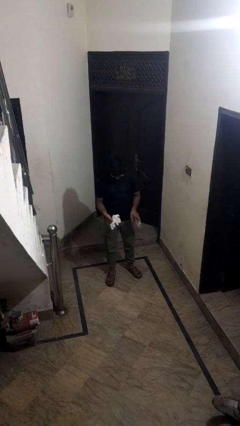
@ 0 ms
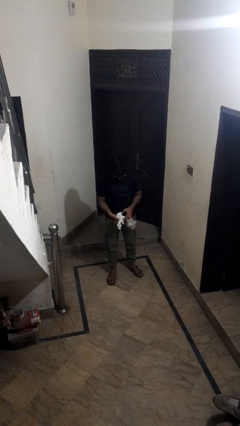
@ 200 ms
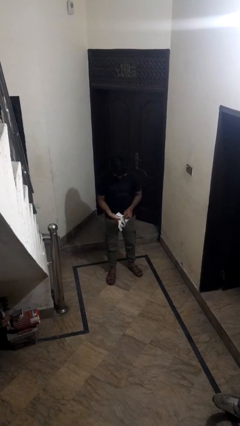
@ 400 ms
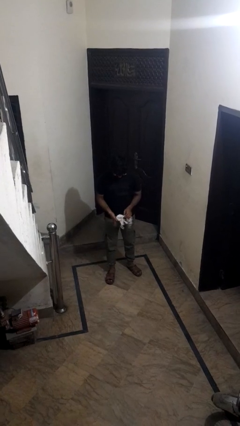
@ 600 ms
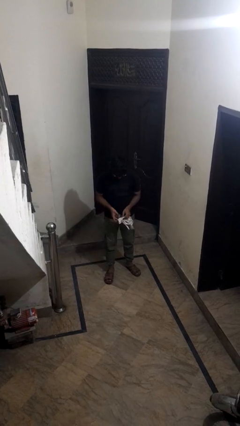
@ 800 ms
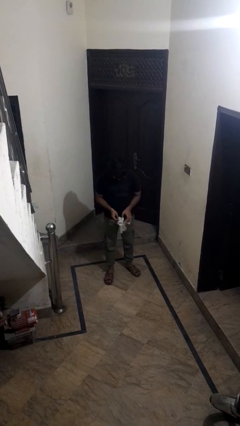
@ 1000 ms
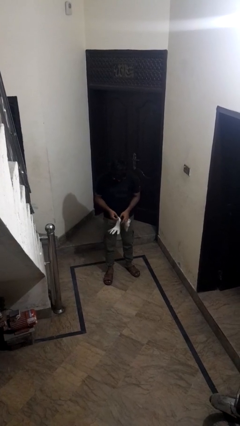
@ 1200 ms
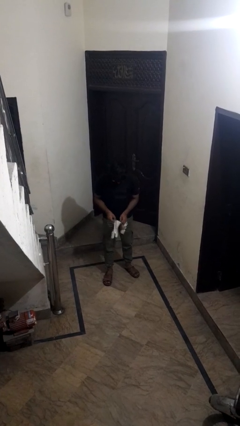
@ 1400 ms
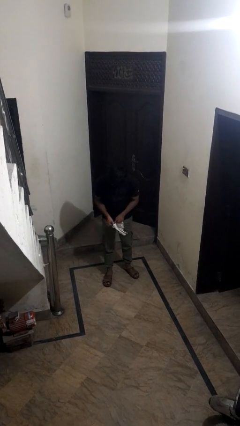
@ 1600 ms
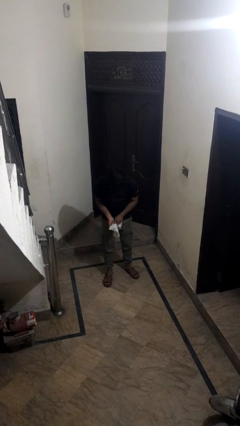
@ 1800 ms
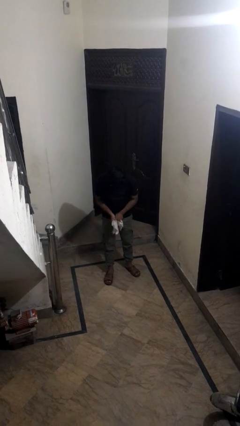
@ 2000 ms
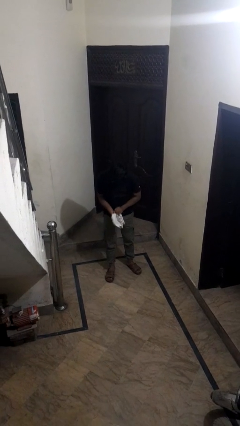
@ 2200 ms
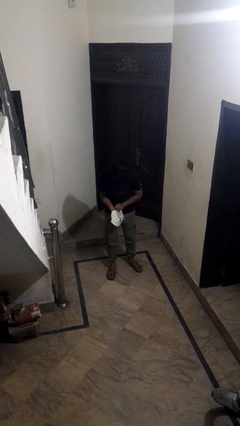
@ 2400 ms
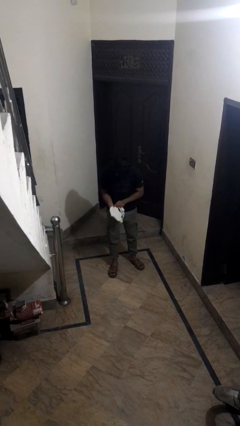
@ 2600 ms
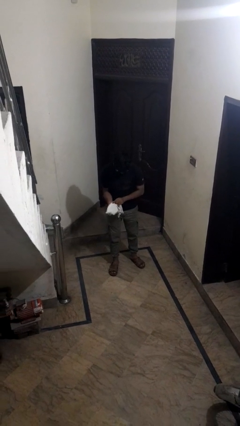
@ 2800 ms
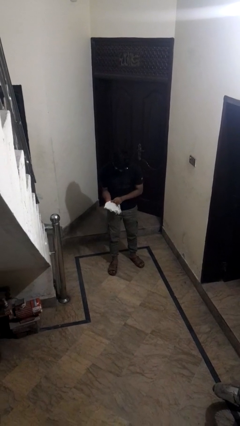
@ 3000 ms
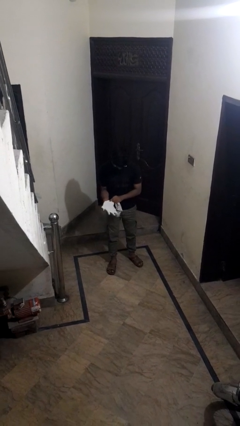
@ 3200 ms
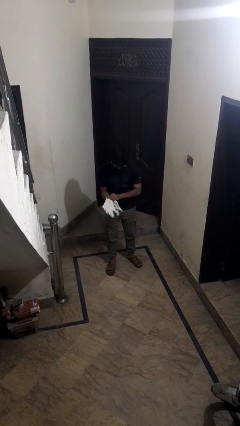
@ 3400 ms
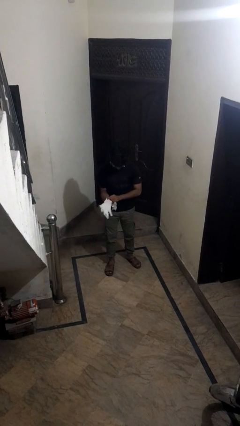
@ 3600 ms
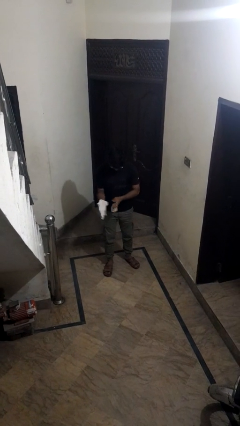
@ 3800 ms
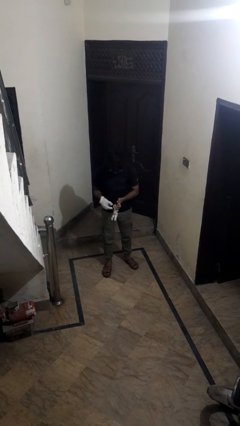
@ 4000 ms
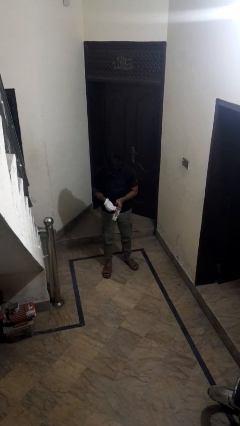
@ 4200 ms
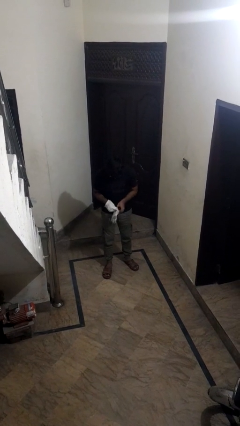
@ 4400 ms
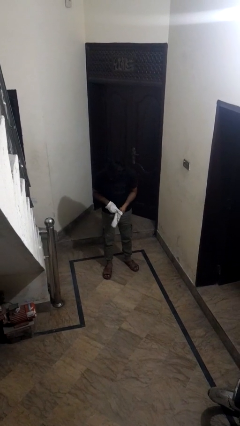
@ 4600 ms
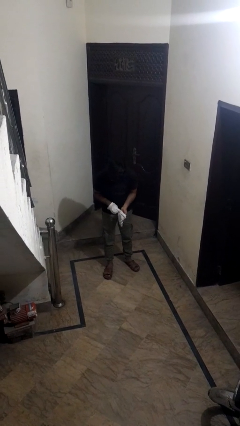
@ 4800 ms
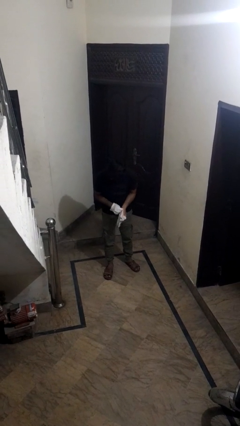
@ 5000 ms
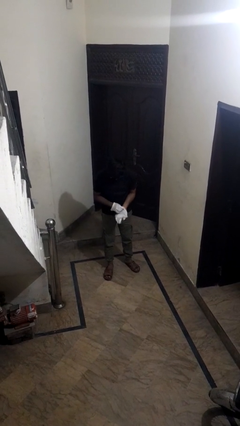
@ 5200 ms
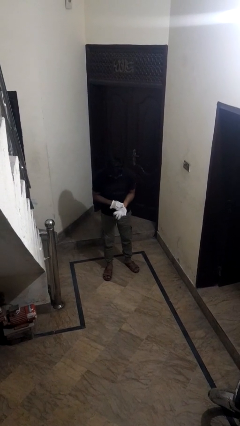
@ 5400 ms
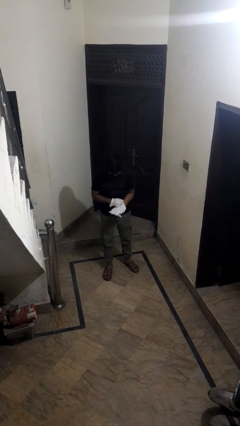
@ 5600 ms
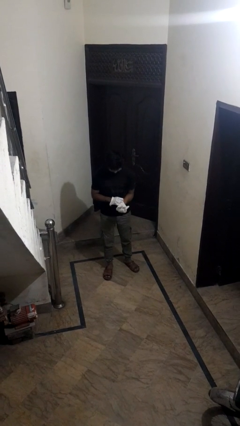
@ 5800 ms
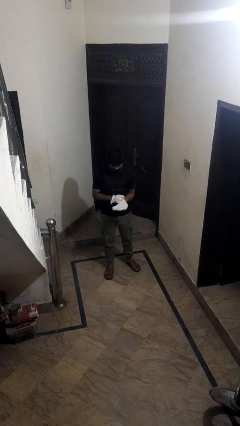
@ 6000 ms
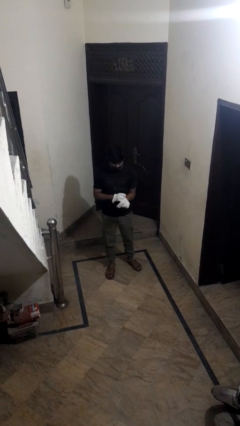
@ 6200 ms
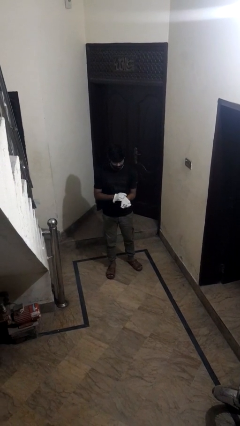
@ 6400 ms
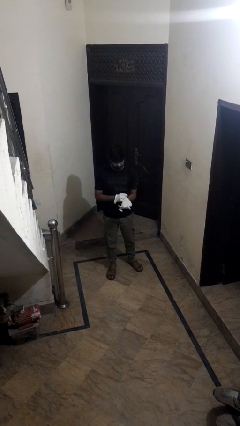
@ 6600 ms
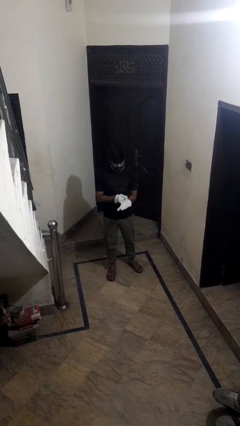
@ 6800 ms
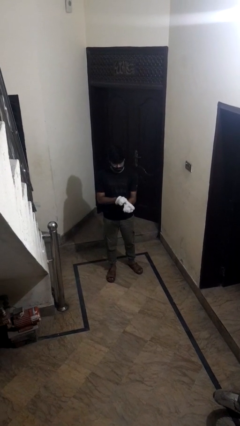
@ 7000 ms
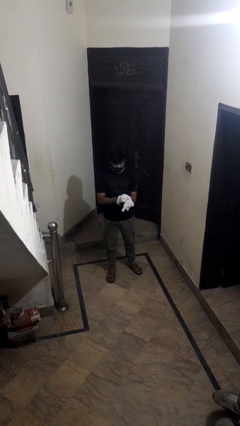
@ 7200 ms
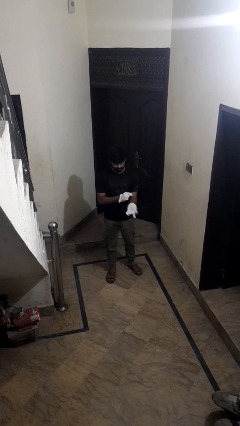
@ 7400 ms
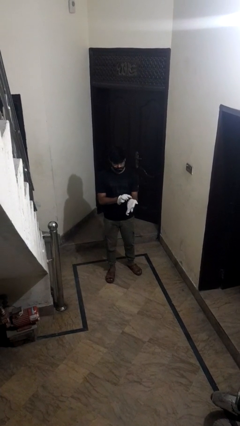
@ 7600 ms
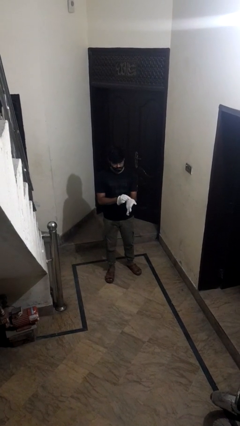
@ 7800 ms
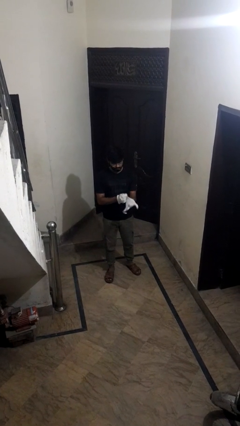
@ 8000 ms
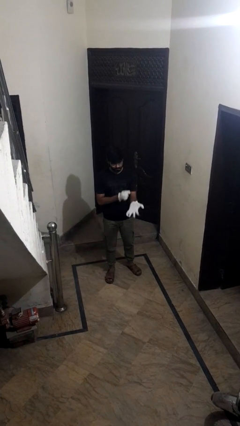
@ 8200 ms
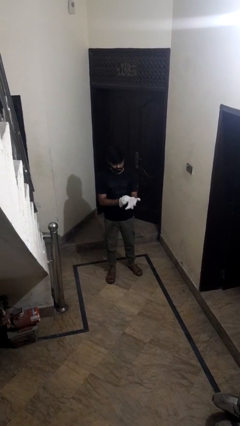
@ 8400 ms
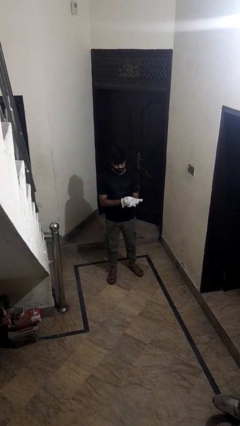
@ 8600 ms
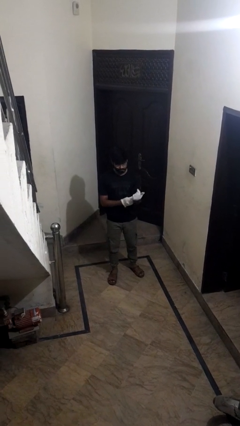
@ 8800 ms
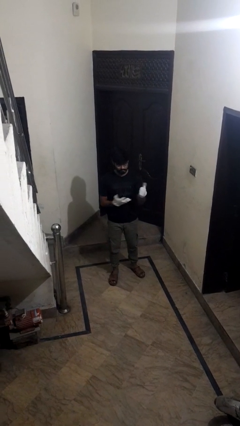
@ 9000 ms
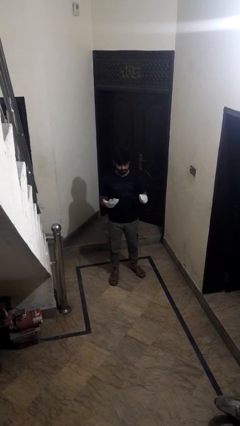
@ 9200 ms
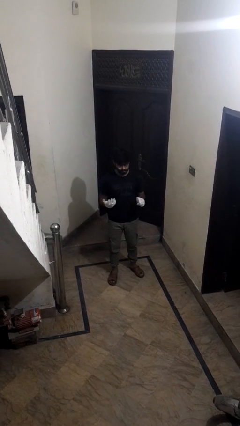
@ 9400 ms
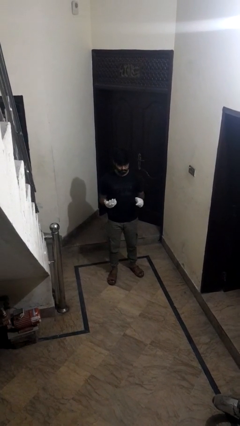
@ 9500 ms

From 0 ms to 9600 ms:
person puts on gloves

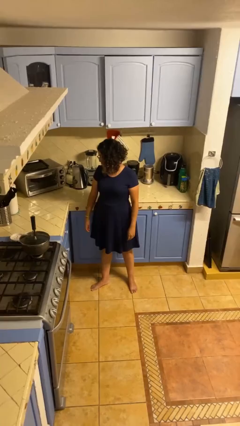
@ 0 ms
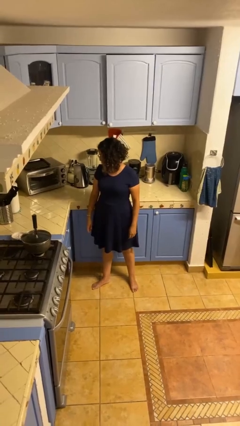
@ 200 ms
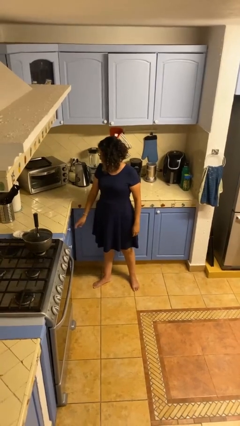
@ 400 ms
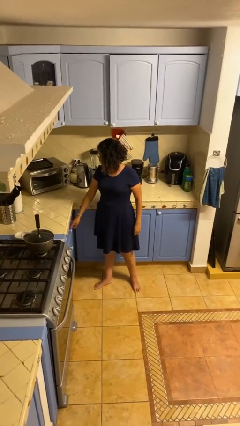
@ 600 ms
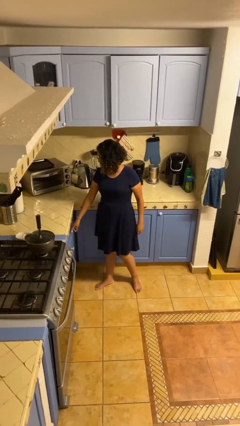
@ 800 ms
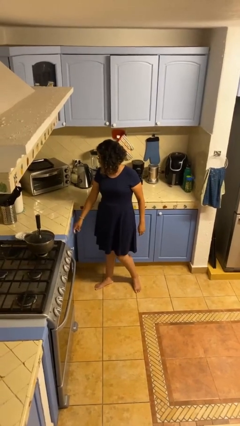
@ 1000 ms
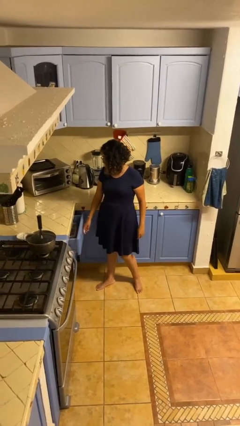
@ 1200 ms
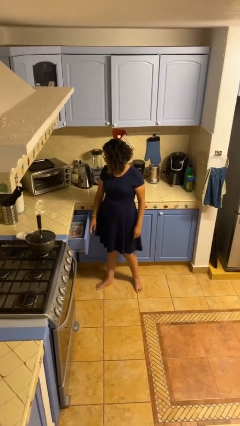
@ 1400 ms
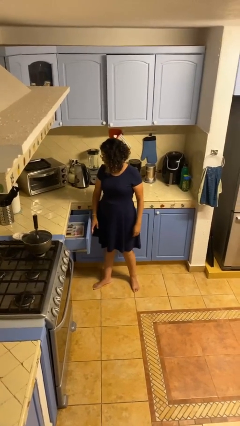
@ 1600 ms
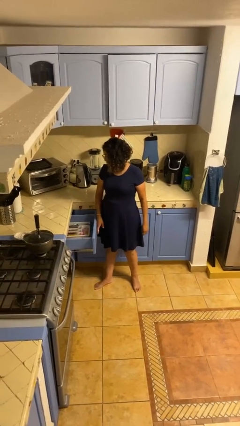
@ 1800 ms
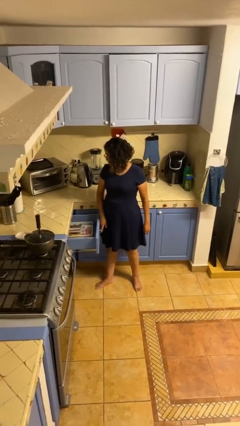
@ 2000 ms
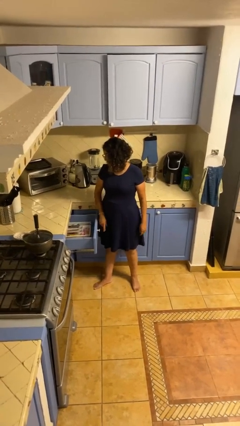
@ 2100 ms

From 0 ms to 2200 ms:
person opens kitchen drawer

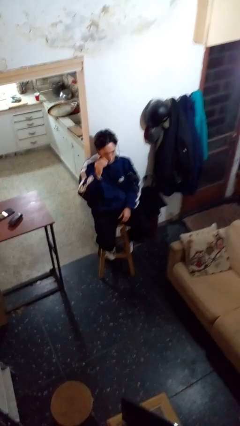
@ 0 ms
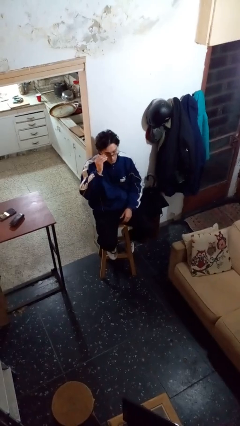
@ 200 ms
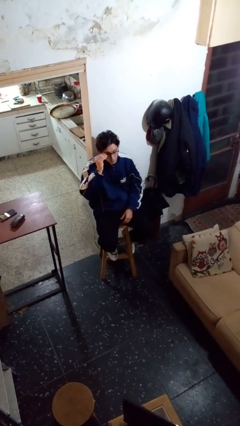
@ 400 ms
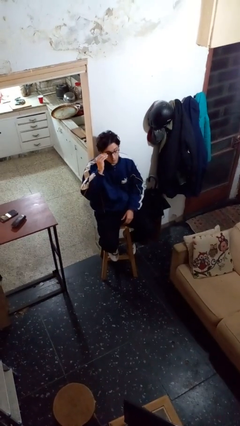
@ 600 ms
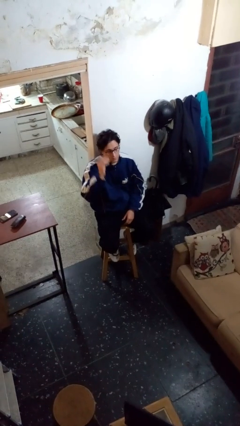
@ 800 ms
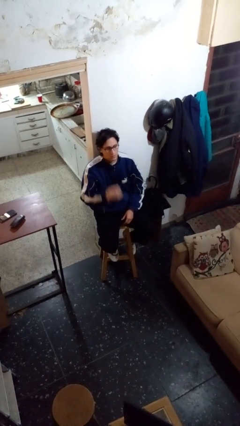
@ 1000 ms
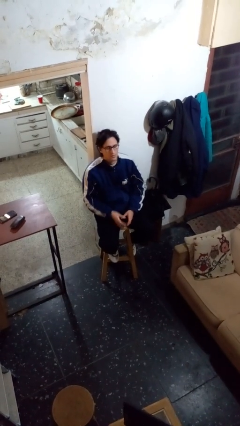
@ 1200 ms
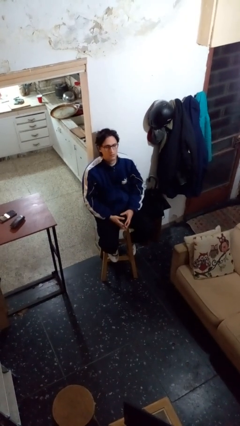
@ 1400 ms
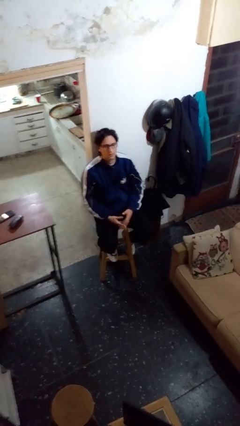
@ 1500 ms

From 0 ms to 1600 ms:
person puts on glasses

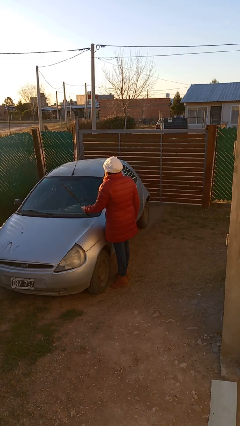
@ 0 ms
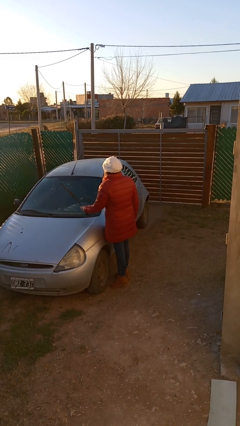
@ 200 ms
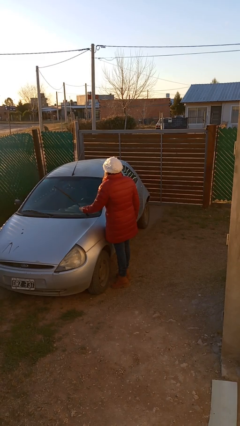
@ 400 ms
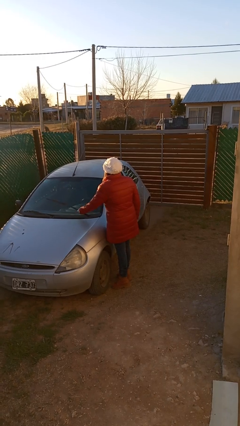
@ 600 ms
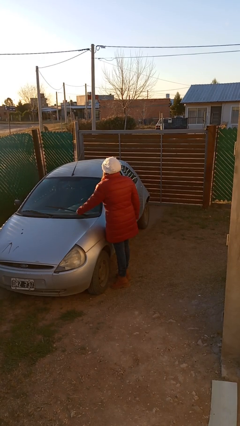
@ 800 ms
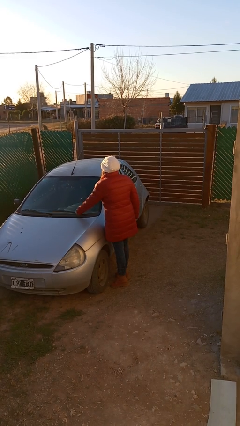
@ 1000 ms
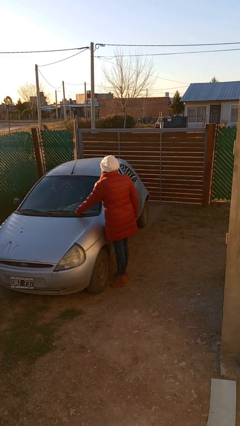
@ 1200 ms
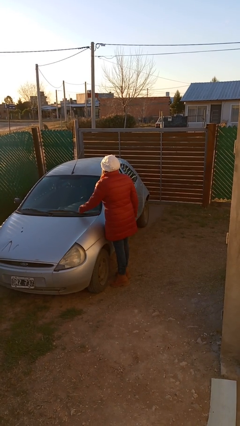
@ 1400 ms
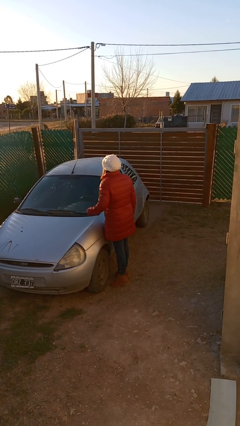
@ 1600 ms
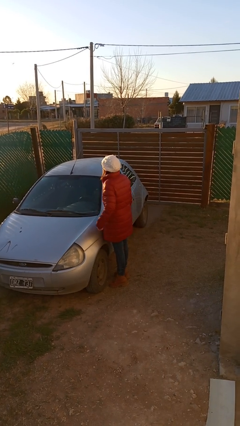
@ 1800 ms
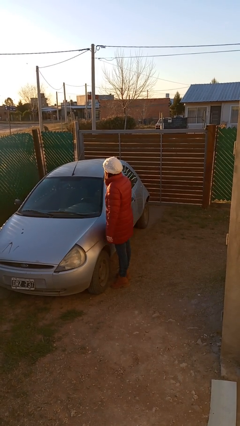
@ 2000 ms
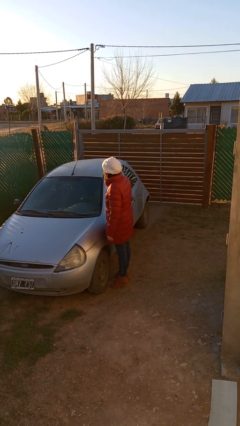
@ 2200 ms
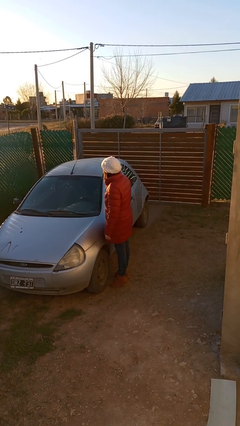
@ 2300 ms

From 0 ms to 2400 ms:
person flips down car wipers

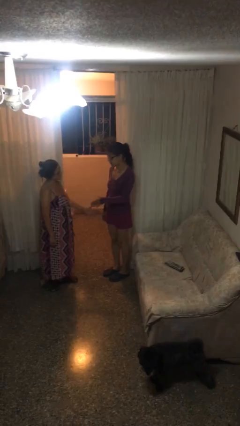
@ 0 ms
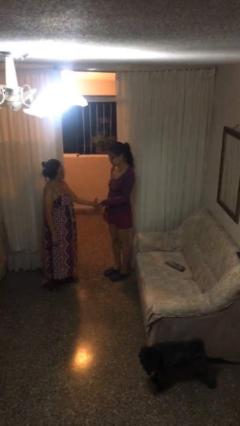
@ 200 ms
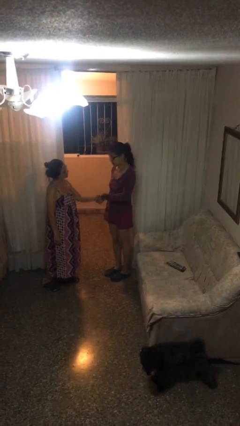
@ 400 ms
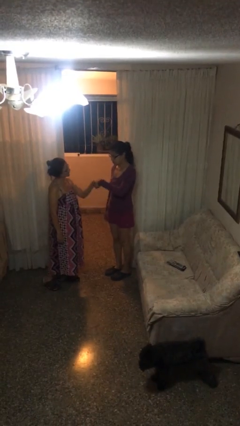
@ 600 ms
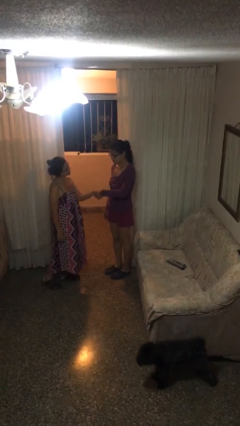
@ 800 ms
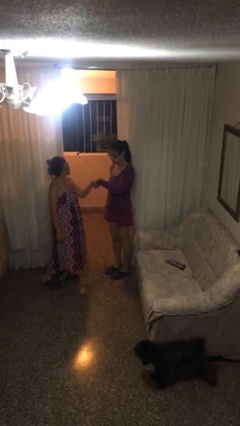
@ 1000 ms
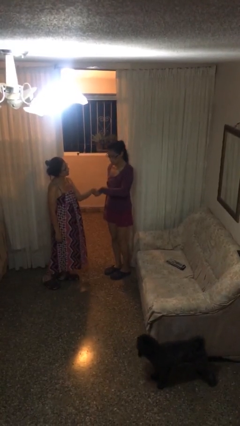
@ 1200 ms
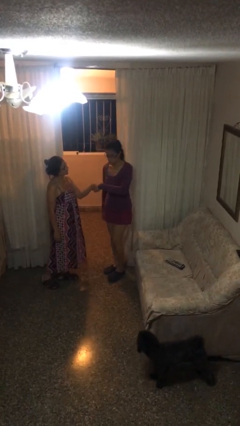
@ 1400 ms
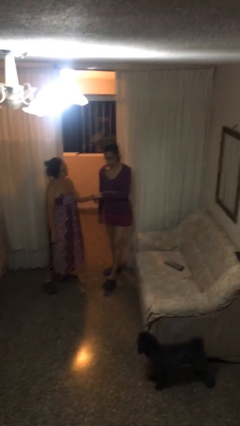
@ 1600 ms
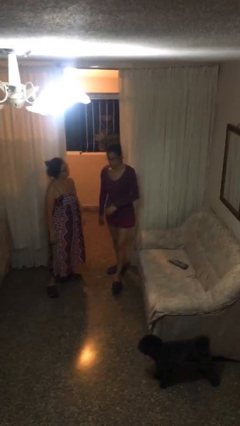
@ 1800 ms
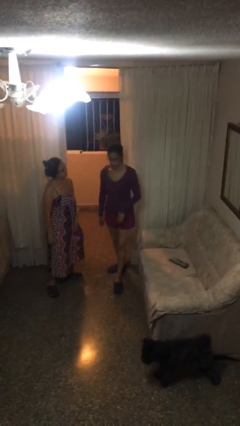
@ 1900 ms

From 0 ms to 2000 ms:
person shakes hand
